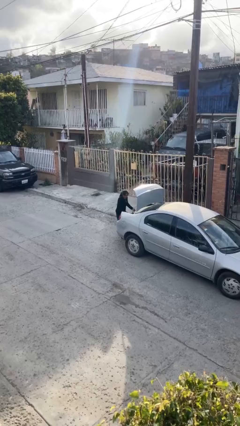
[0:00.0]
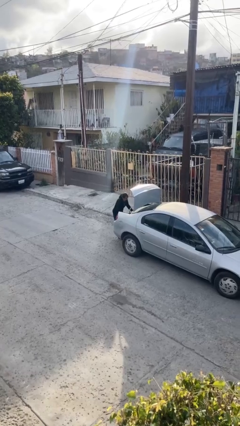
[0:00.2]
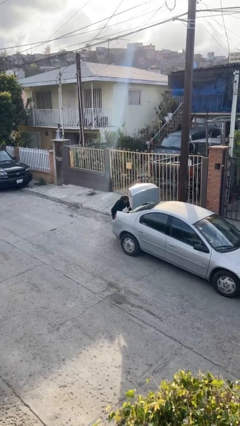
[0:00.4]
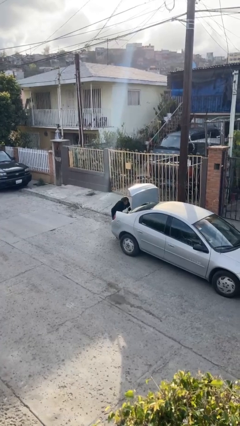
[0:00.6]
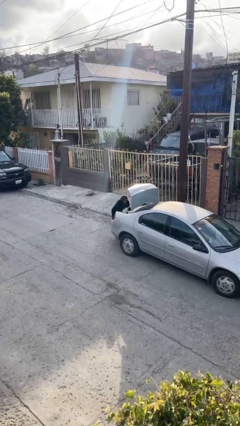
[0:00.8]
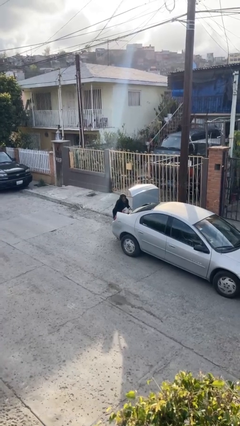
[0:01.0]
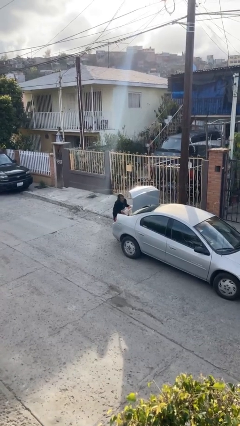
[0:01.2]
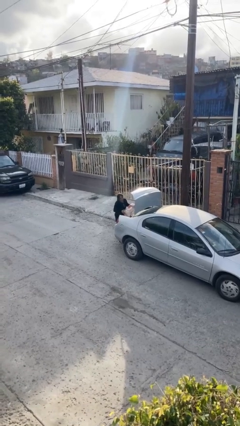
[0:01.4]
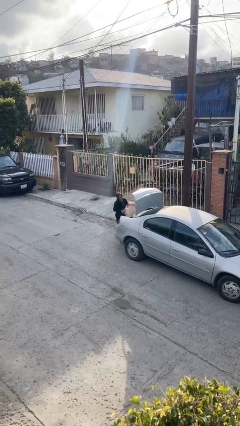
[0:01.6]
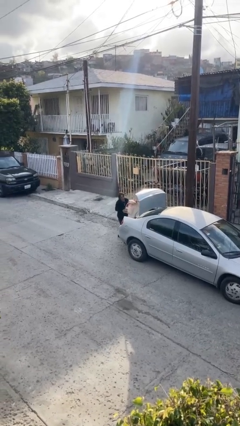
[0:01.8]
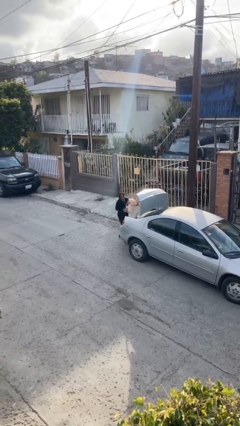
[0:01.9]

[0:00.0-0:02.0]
person unloads car

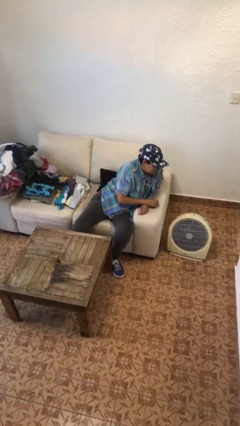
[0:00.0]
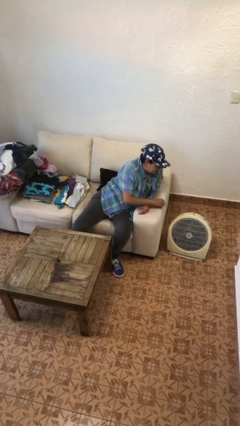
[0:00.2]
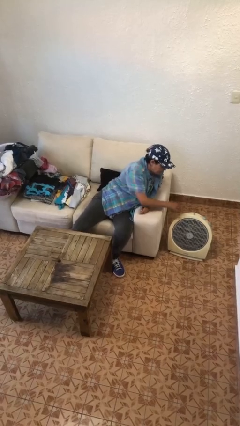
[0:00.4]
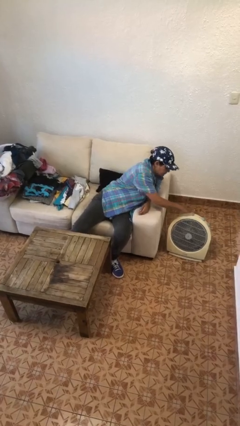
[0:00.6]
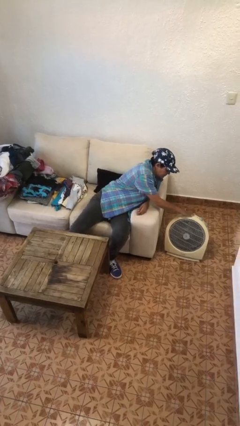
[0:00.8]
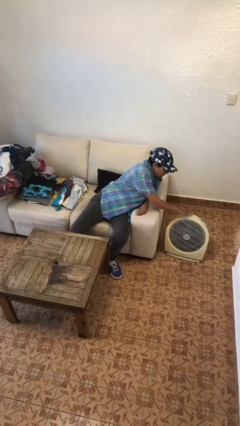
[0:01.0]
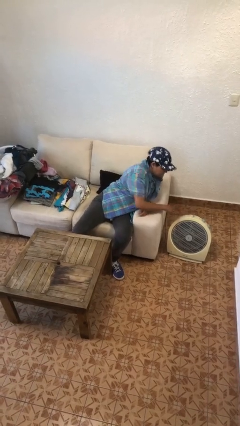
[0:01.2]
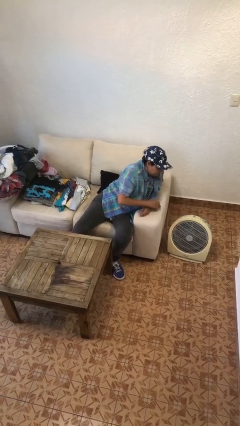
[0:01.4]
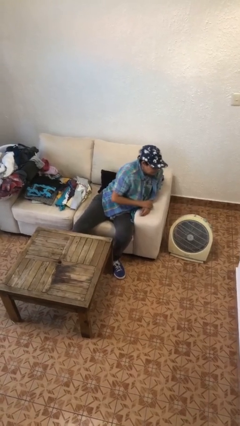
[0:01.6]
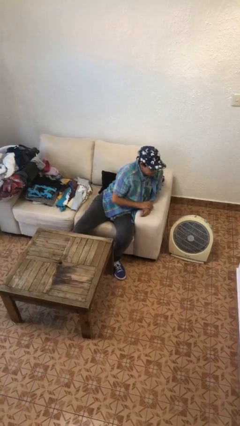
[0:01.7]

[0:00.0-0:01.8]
person turns off fan

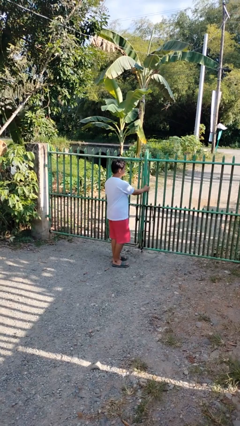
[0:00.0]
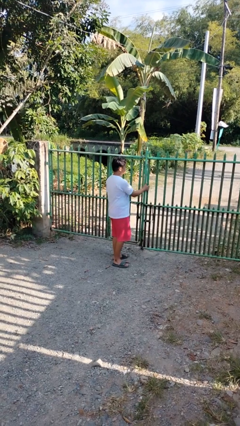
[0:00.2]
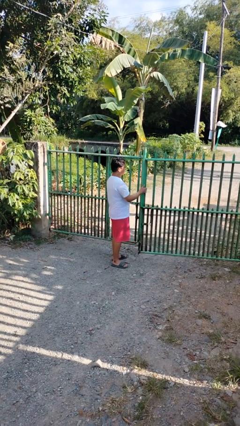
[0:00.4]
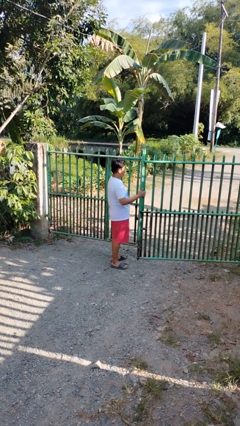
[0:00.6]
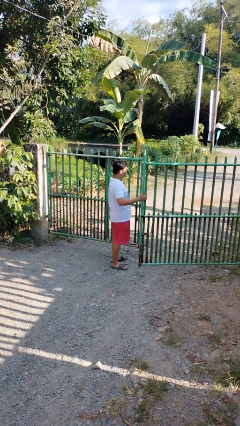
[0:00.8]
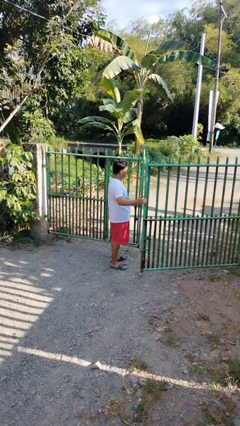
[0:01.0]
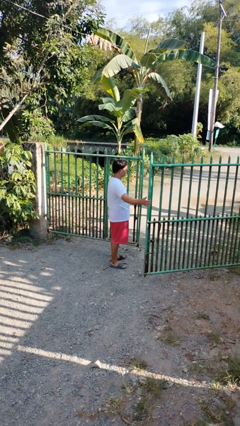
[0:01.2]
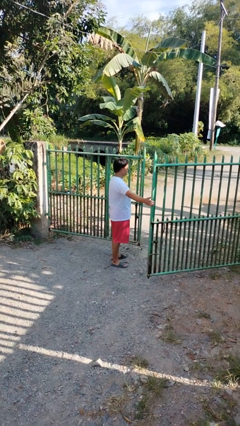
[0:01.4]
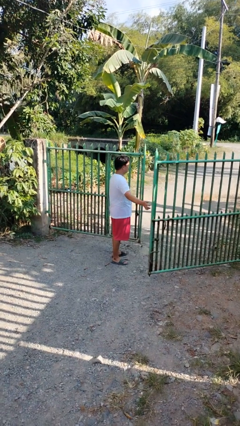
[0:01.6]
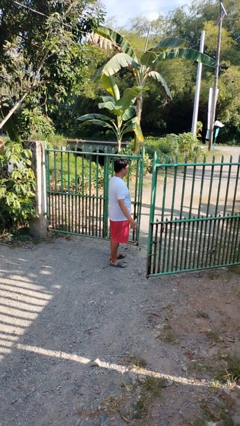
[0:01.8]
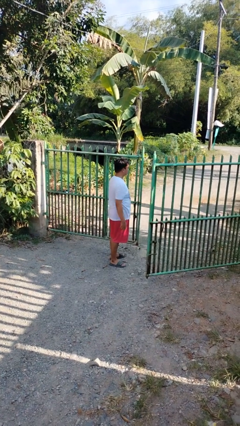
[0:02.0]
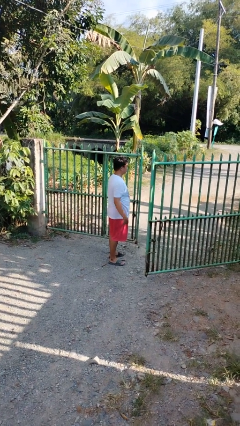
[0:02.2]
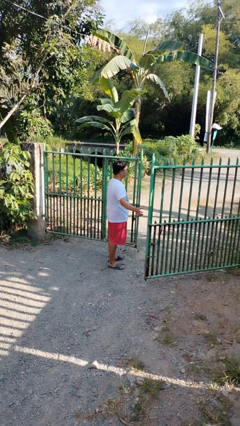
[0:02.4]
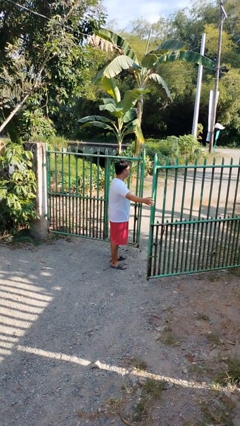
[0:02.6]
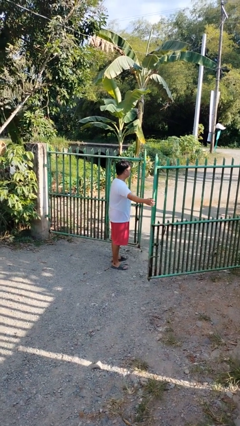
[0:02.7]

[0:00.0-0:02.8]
person opens gate

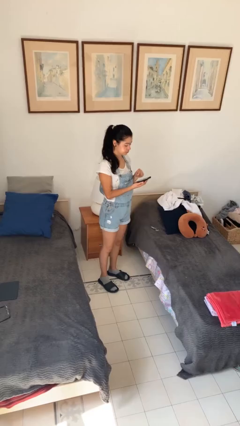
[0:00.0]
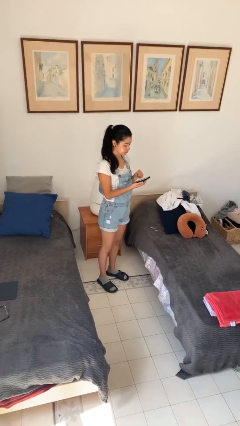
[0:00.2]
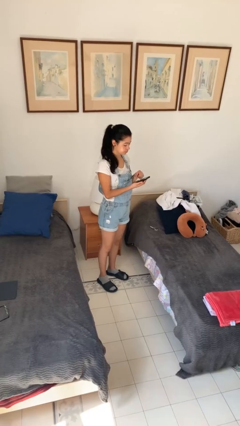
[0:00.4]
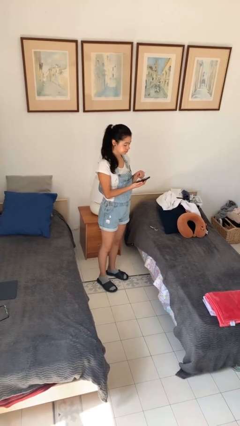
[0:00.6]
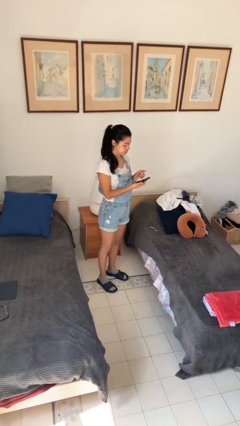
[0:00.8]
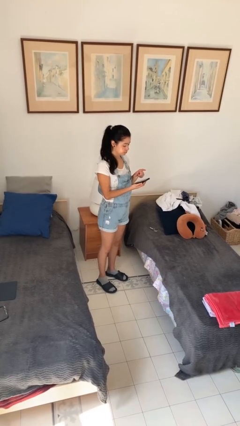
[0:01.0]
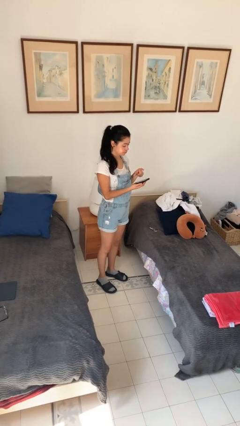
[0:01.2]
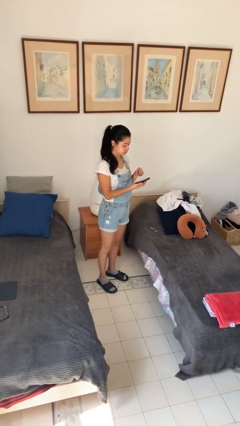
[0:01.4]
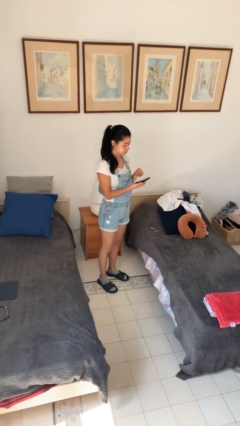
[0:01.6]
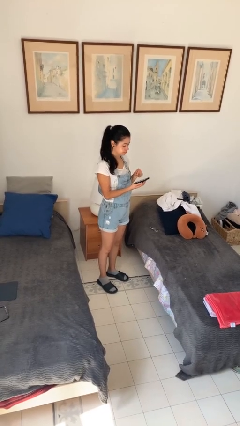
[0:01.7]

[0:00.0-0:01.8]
person gestures zoom out

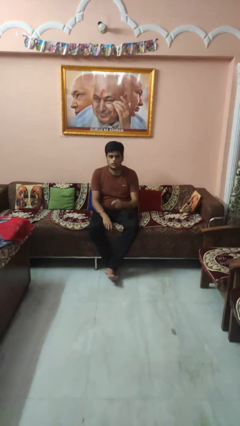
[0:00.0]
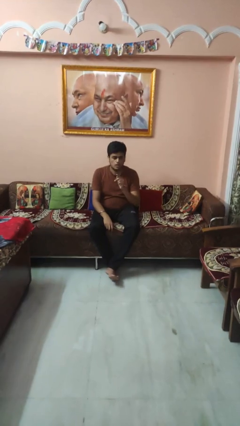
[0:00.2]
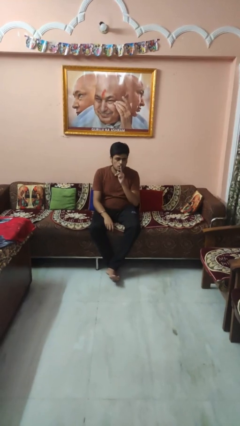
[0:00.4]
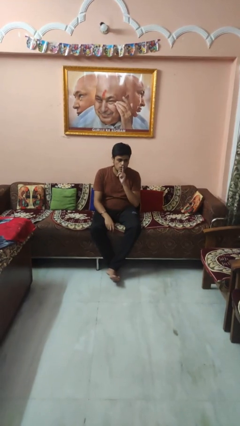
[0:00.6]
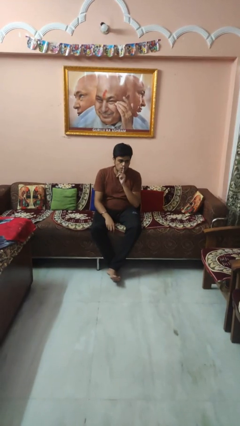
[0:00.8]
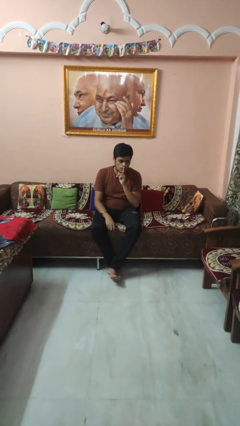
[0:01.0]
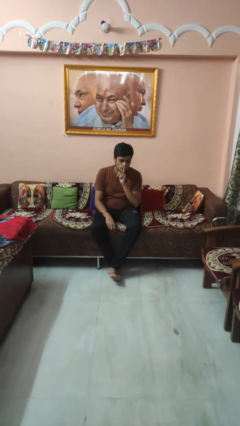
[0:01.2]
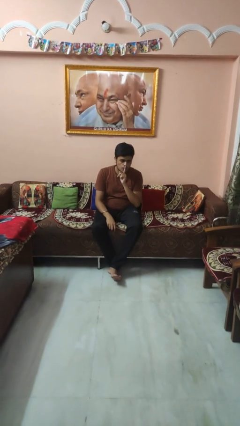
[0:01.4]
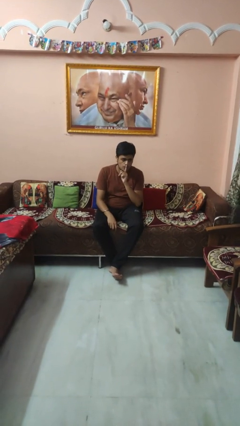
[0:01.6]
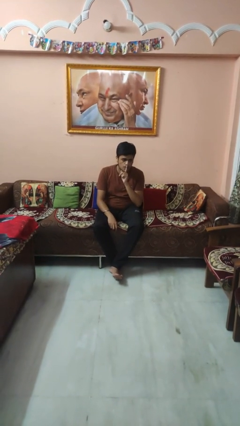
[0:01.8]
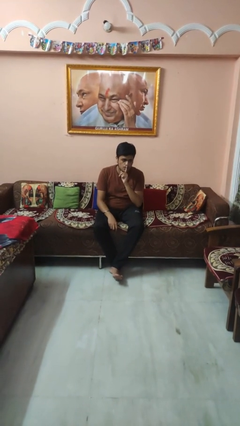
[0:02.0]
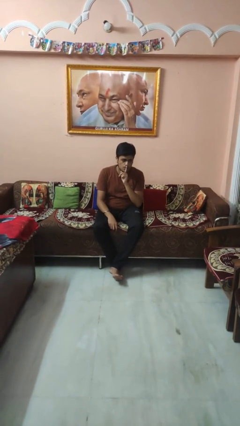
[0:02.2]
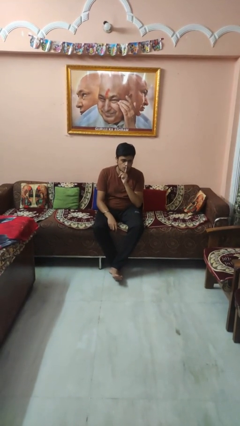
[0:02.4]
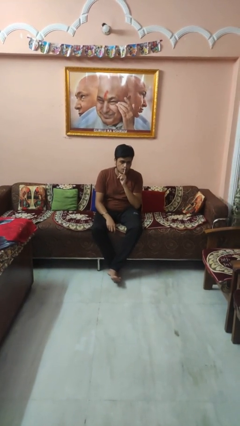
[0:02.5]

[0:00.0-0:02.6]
person gestures be quiet

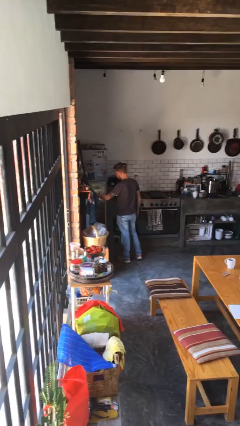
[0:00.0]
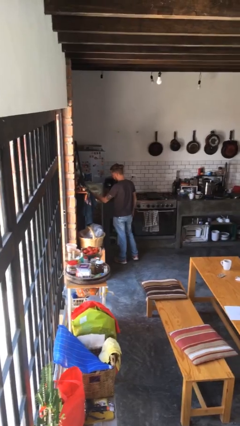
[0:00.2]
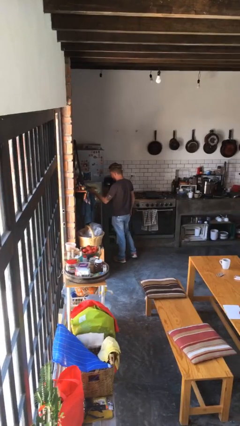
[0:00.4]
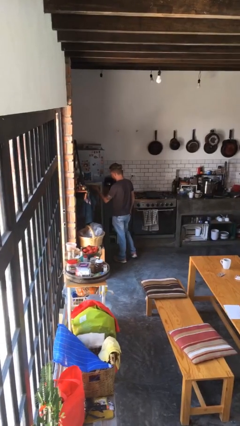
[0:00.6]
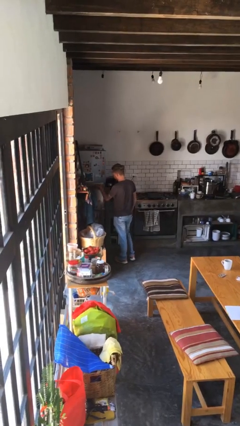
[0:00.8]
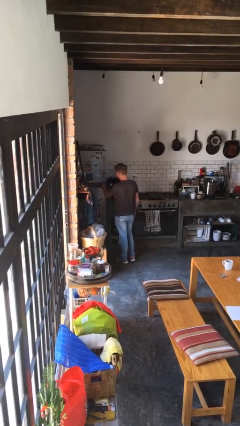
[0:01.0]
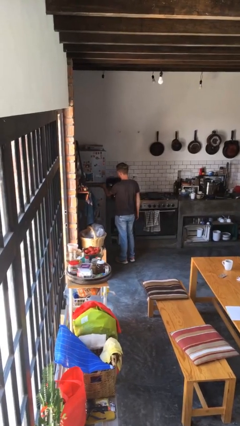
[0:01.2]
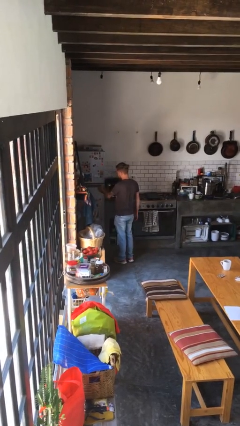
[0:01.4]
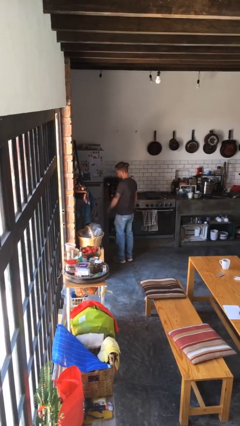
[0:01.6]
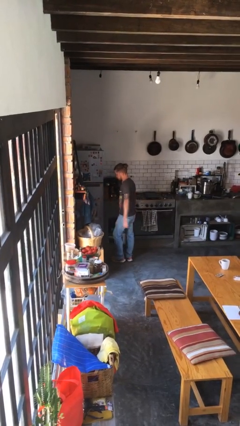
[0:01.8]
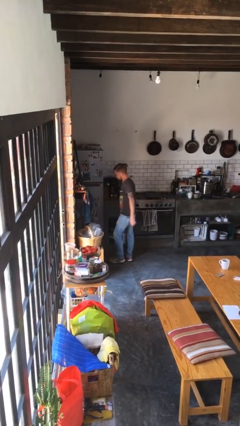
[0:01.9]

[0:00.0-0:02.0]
person closes refrigerator

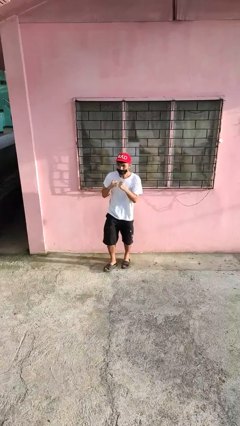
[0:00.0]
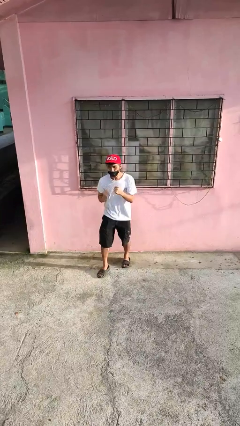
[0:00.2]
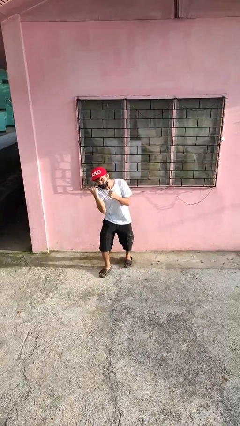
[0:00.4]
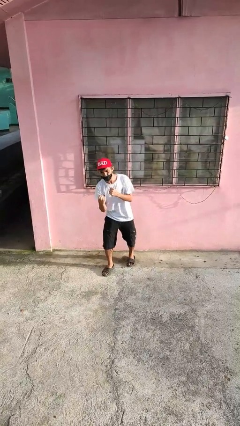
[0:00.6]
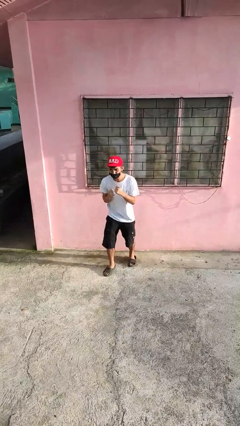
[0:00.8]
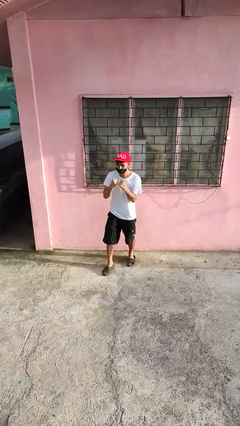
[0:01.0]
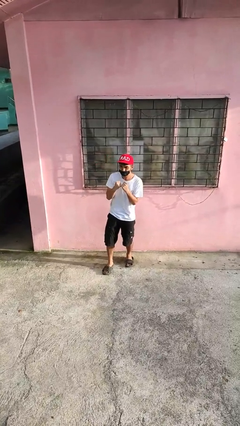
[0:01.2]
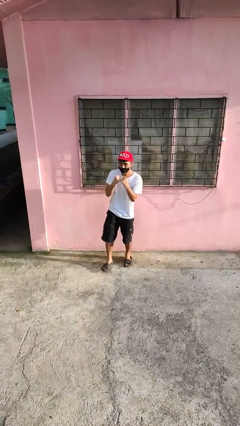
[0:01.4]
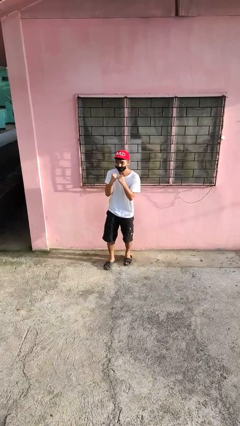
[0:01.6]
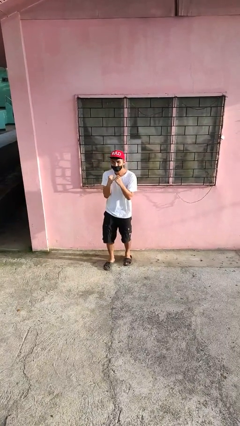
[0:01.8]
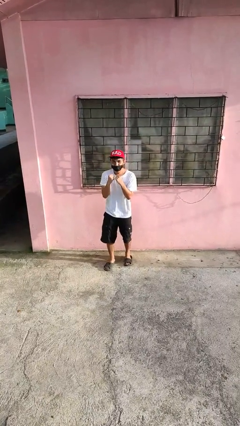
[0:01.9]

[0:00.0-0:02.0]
person punches

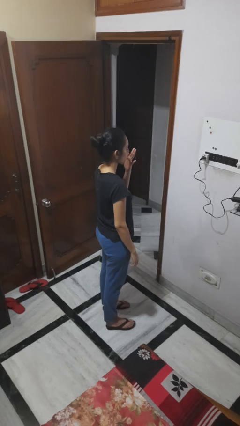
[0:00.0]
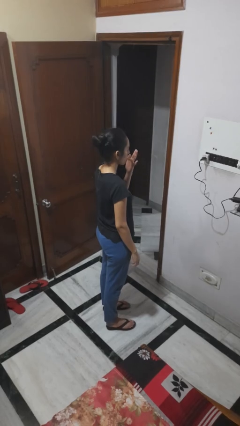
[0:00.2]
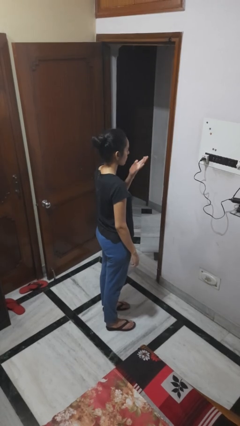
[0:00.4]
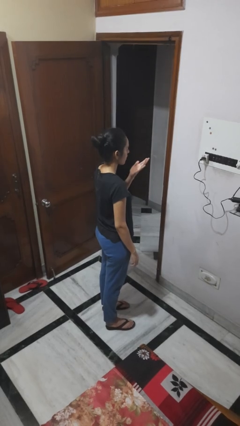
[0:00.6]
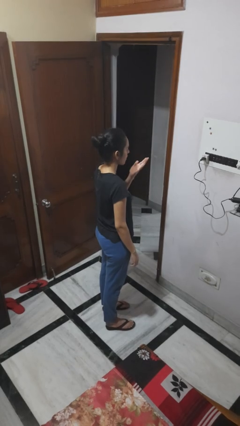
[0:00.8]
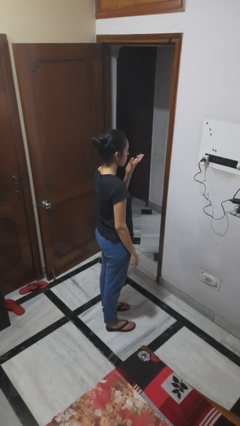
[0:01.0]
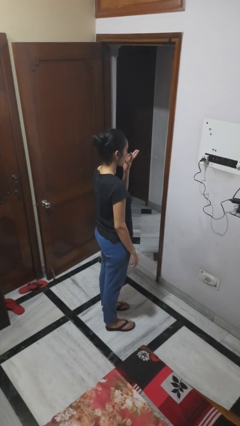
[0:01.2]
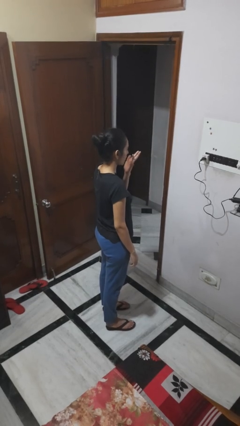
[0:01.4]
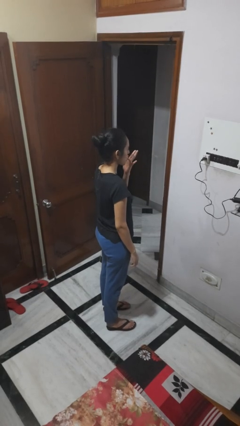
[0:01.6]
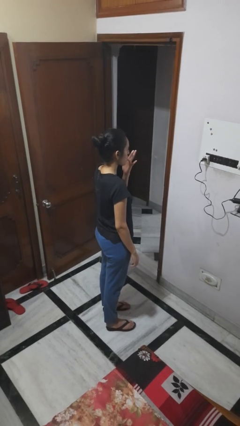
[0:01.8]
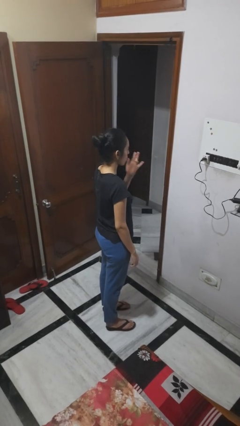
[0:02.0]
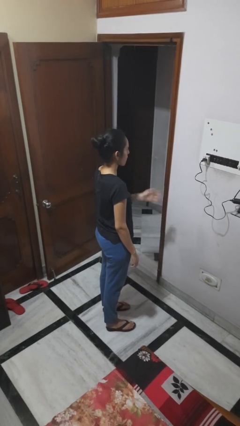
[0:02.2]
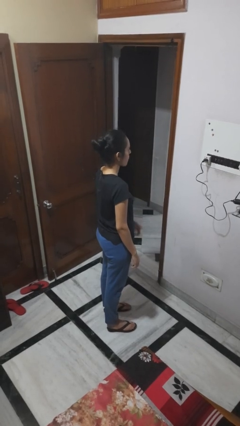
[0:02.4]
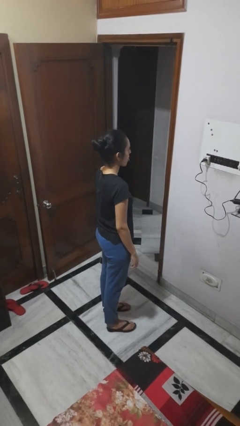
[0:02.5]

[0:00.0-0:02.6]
person licks fingers
